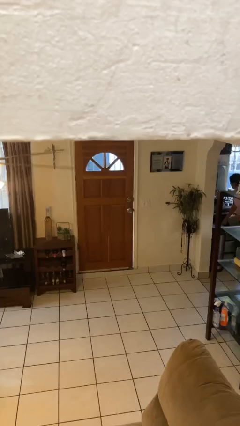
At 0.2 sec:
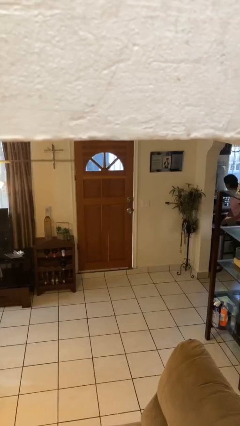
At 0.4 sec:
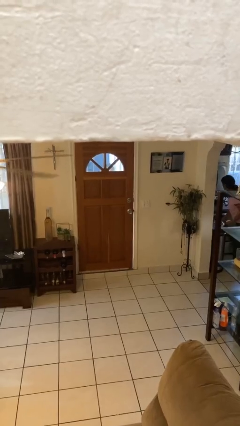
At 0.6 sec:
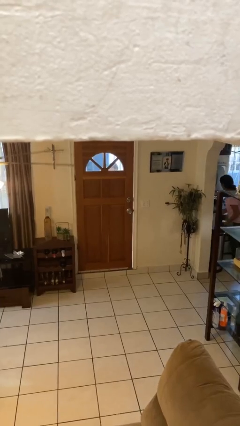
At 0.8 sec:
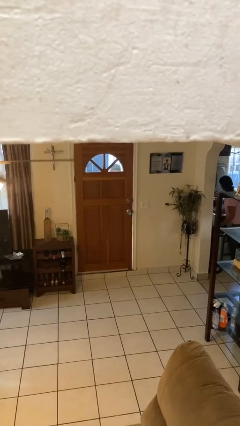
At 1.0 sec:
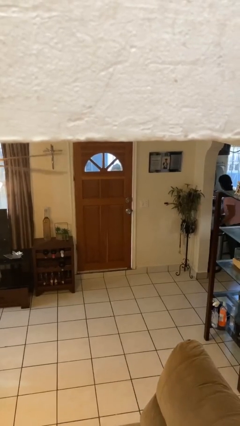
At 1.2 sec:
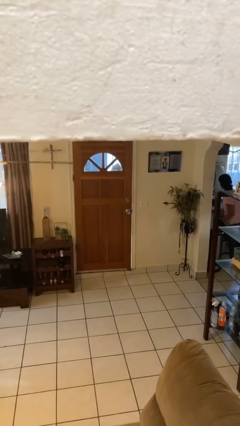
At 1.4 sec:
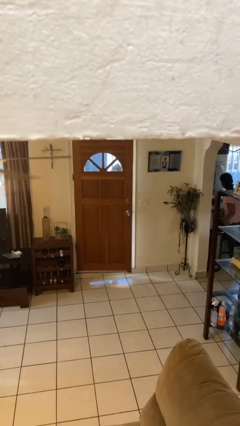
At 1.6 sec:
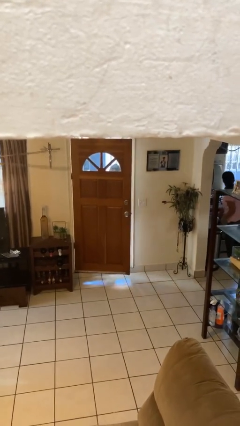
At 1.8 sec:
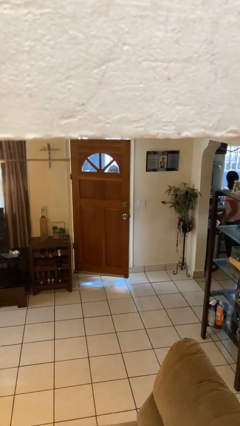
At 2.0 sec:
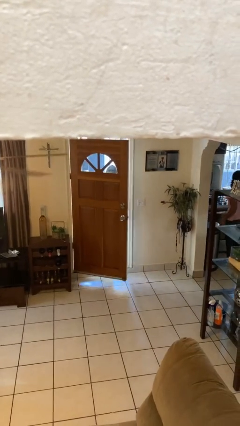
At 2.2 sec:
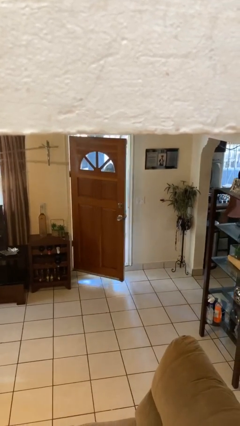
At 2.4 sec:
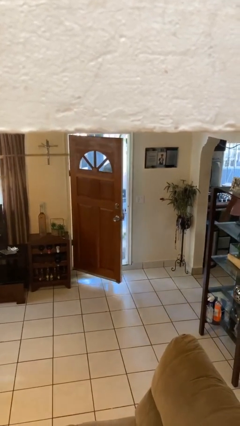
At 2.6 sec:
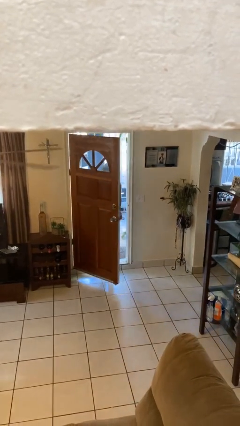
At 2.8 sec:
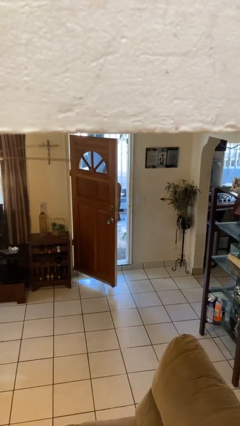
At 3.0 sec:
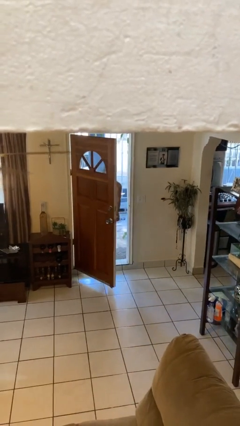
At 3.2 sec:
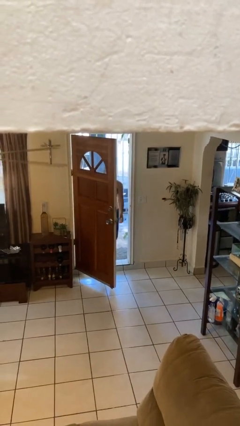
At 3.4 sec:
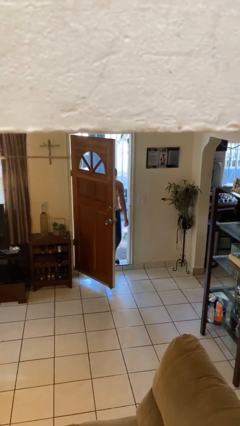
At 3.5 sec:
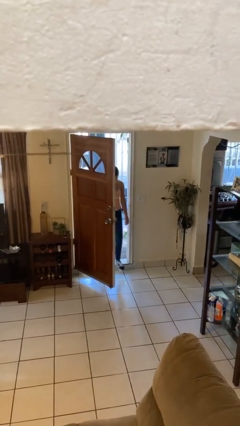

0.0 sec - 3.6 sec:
person opens facility door

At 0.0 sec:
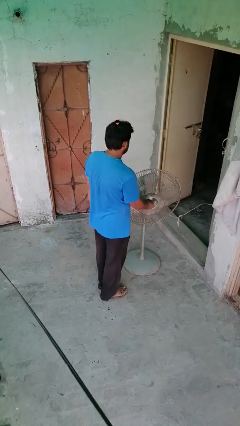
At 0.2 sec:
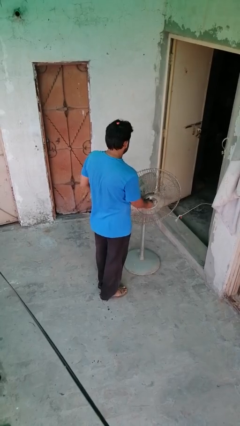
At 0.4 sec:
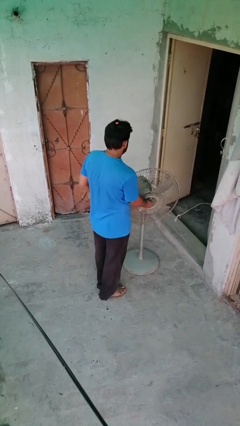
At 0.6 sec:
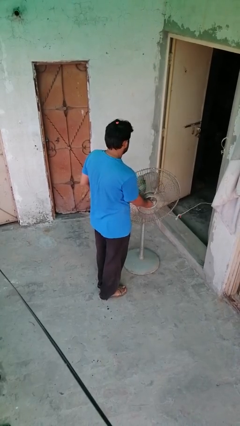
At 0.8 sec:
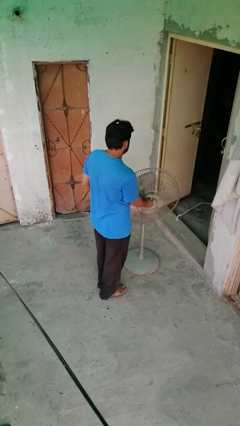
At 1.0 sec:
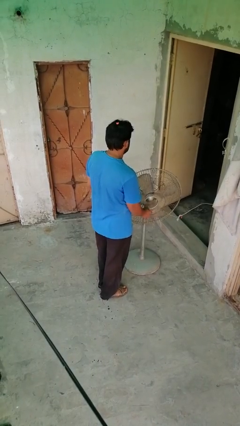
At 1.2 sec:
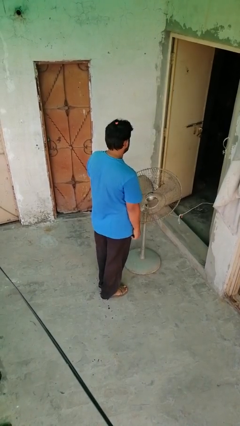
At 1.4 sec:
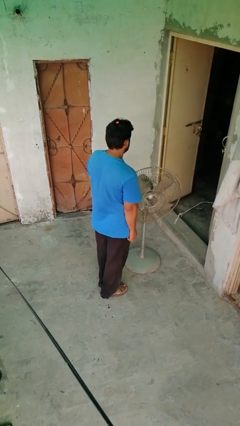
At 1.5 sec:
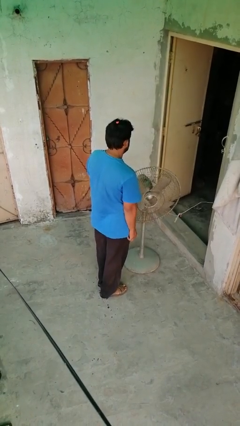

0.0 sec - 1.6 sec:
person turns off fan

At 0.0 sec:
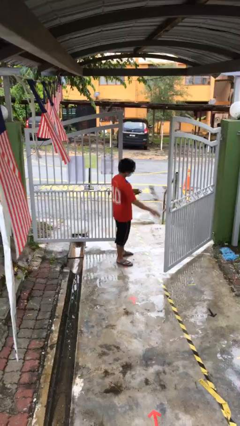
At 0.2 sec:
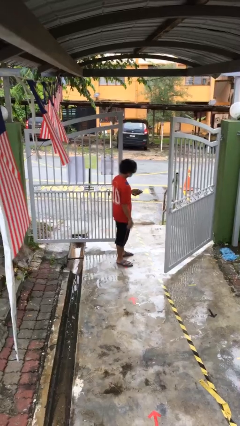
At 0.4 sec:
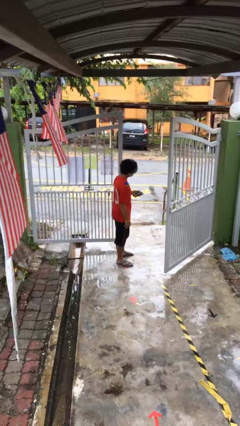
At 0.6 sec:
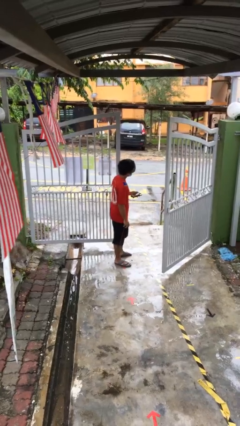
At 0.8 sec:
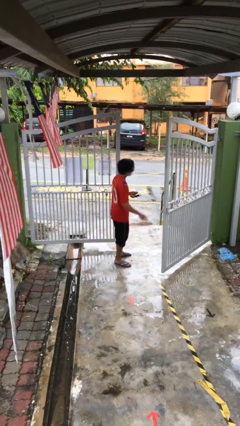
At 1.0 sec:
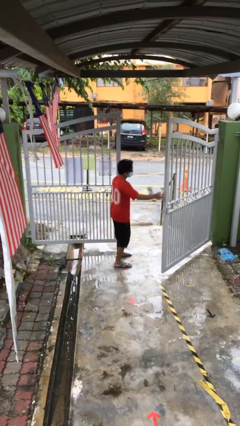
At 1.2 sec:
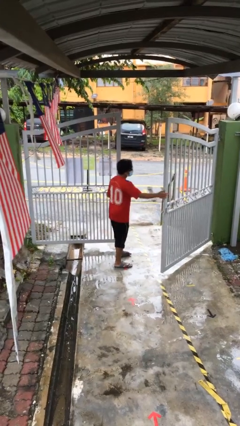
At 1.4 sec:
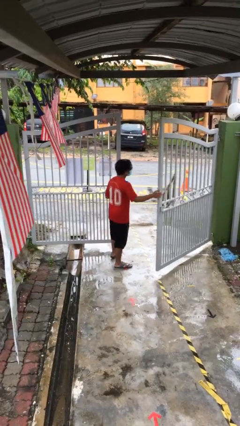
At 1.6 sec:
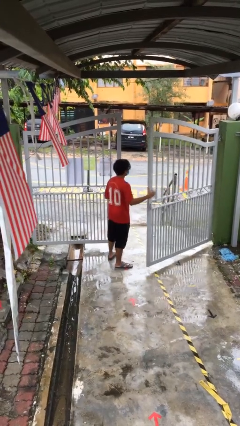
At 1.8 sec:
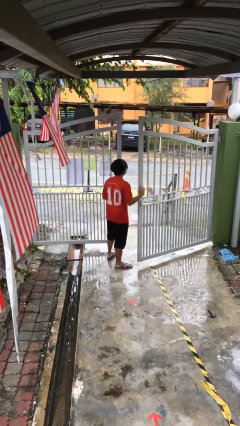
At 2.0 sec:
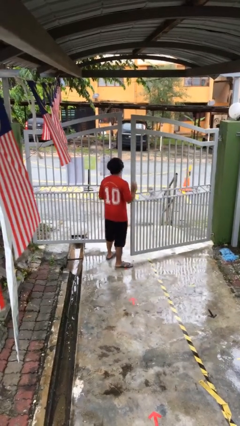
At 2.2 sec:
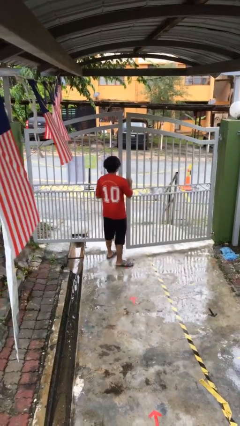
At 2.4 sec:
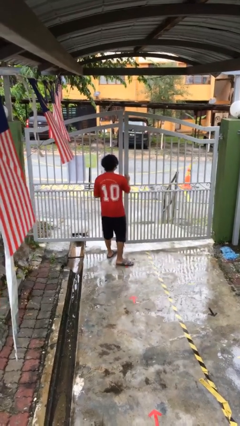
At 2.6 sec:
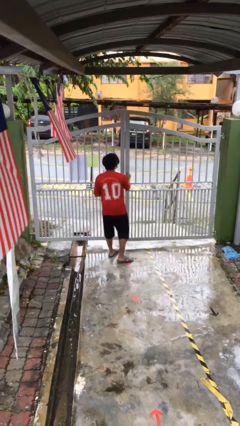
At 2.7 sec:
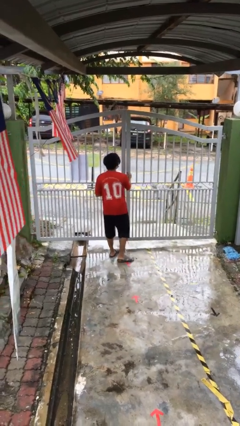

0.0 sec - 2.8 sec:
person closes facility door

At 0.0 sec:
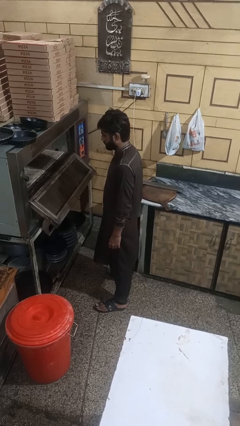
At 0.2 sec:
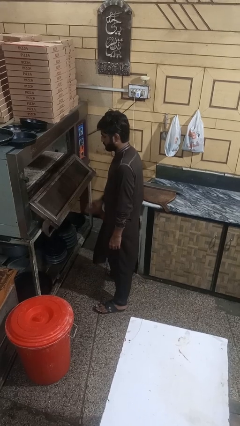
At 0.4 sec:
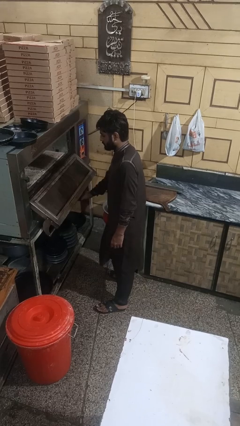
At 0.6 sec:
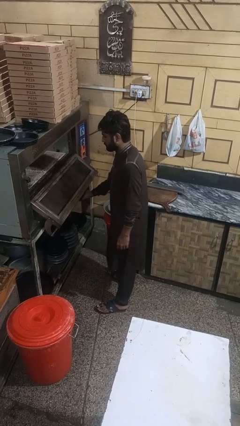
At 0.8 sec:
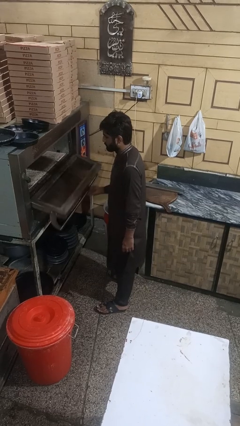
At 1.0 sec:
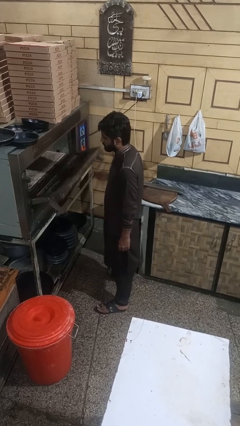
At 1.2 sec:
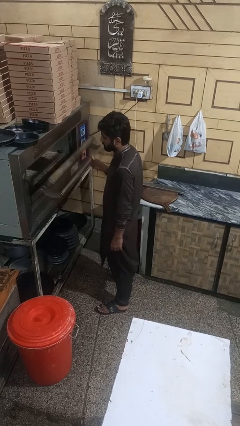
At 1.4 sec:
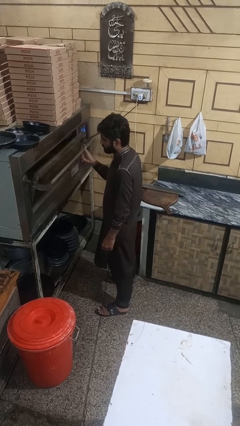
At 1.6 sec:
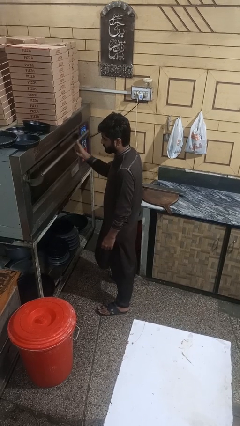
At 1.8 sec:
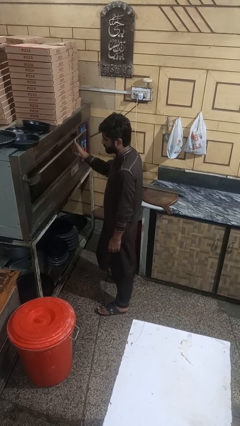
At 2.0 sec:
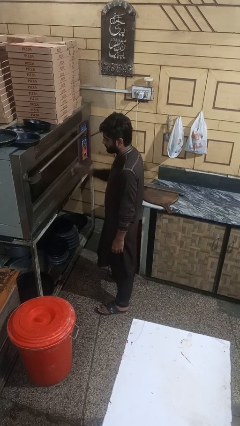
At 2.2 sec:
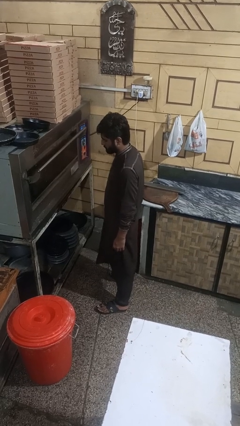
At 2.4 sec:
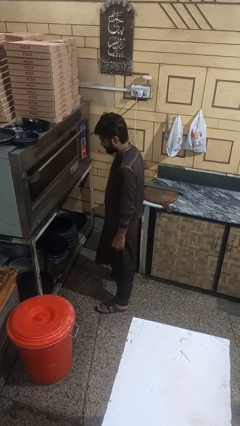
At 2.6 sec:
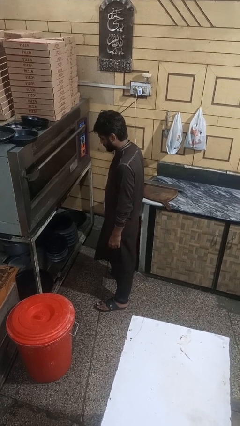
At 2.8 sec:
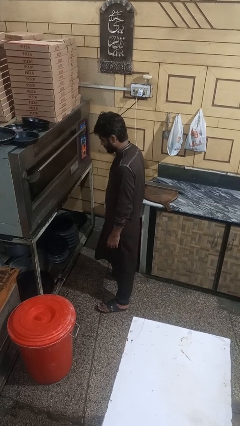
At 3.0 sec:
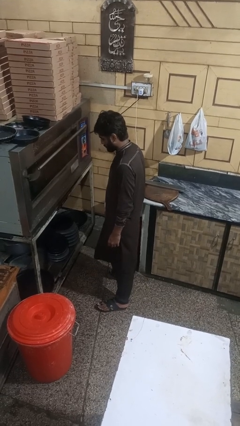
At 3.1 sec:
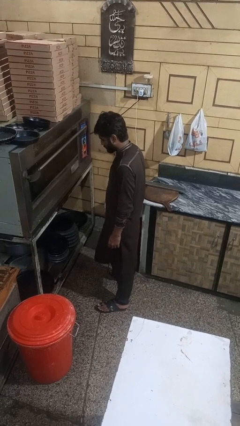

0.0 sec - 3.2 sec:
person closes microwave

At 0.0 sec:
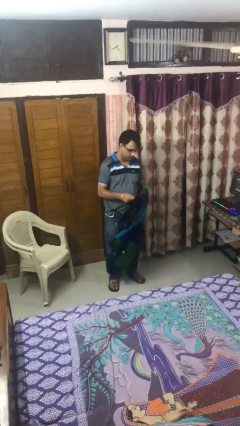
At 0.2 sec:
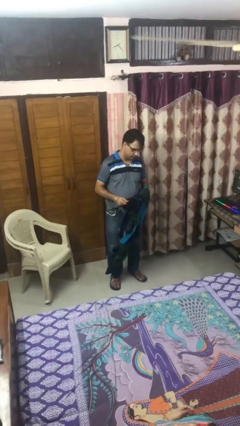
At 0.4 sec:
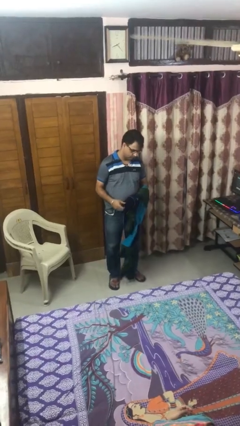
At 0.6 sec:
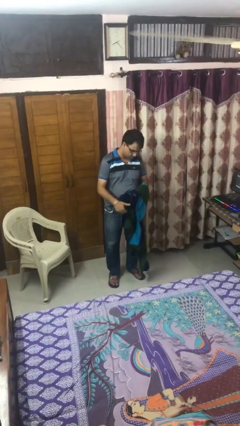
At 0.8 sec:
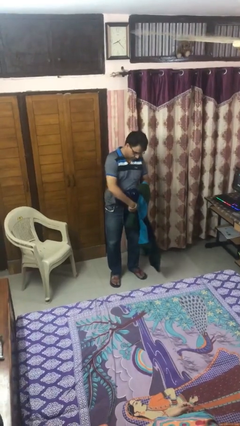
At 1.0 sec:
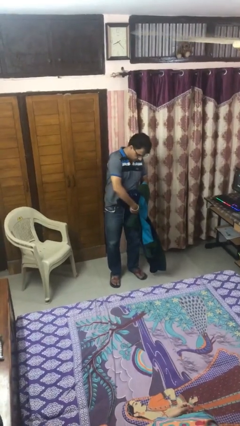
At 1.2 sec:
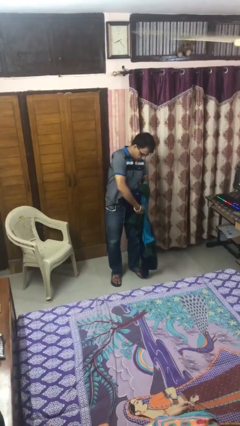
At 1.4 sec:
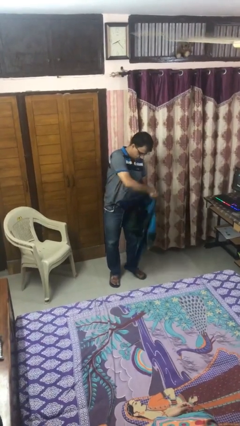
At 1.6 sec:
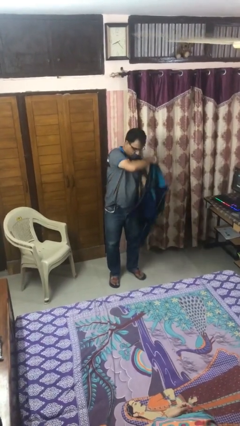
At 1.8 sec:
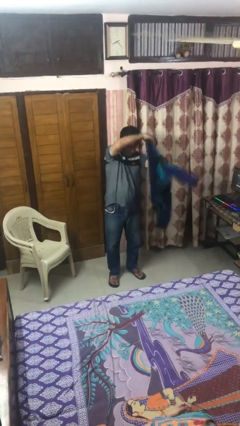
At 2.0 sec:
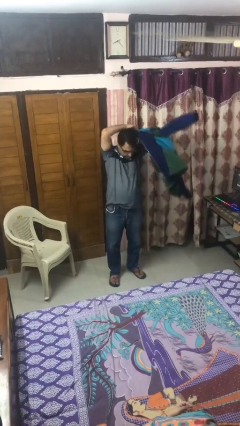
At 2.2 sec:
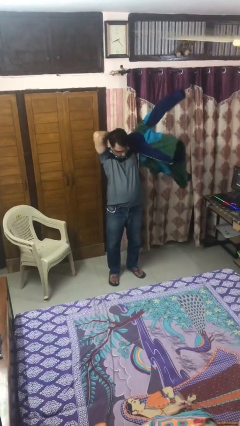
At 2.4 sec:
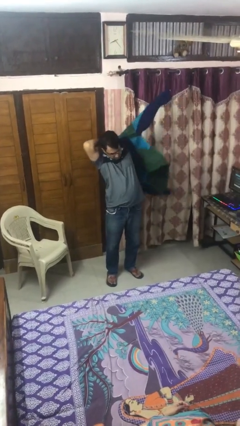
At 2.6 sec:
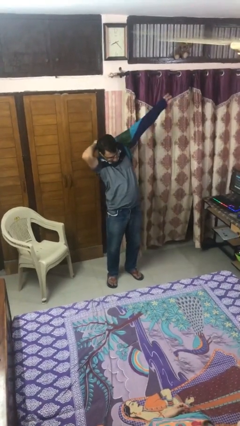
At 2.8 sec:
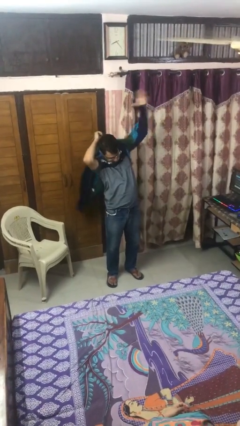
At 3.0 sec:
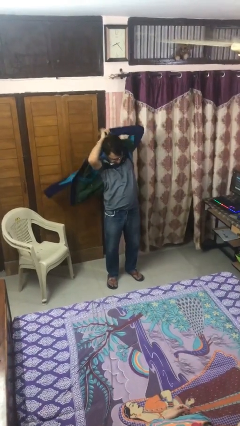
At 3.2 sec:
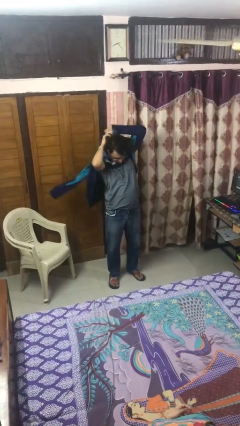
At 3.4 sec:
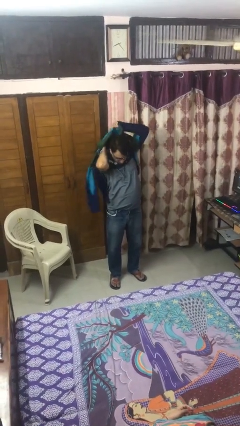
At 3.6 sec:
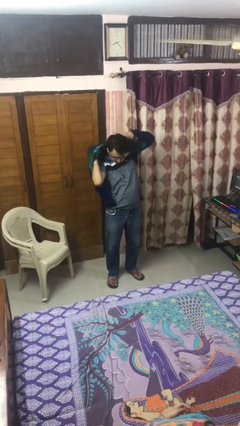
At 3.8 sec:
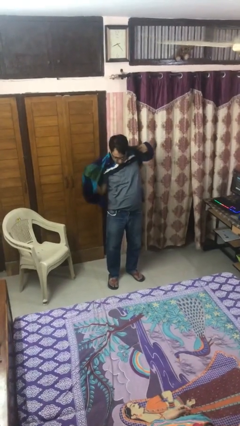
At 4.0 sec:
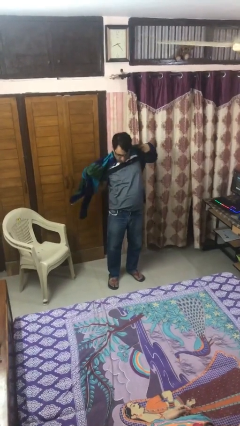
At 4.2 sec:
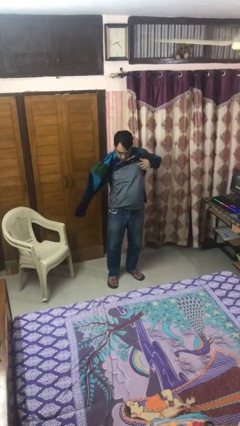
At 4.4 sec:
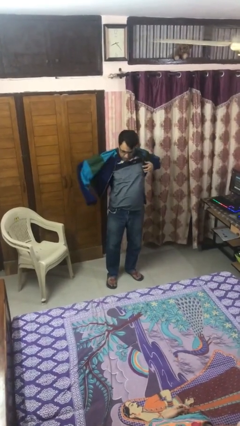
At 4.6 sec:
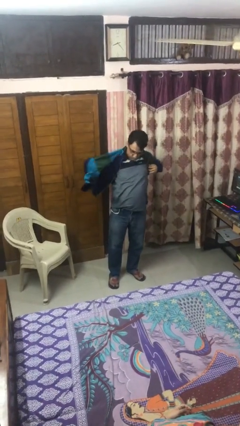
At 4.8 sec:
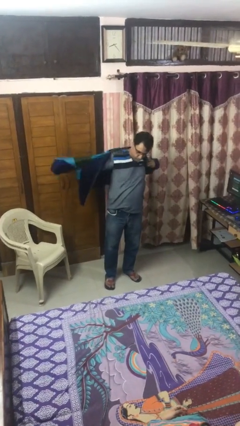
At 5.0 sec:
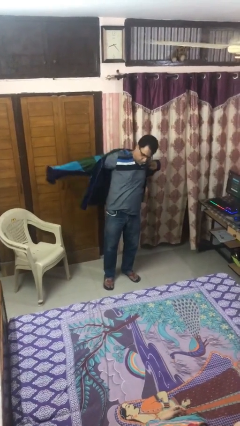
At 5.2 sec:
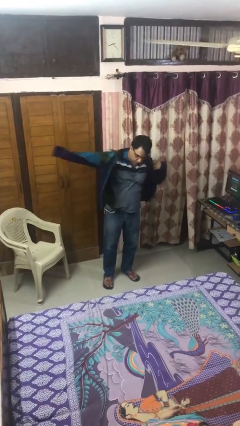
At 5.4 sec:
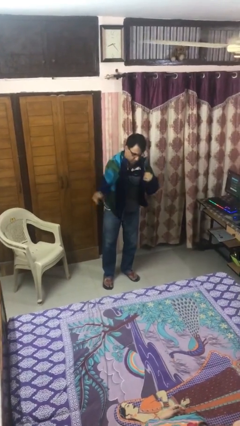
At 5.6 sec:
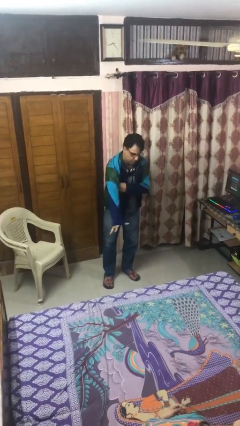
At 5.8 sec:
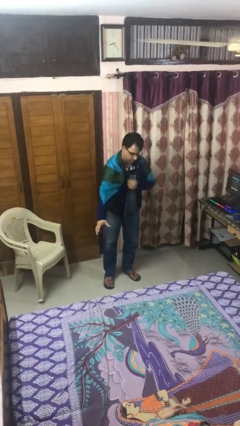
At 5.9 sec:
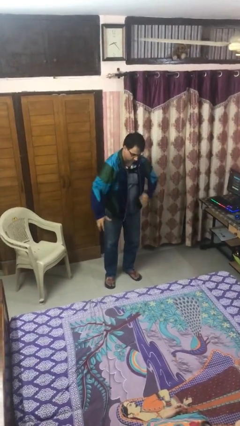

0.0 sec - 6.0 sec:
person puts on jacket

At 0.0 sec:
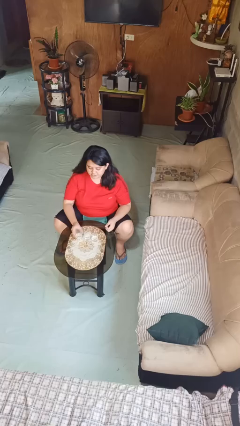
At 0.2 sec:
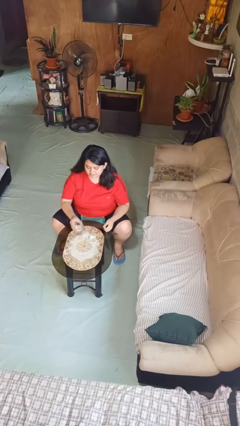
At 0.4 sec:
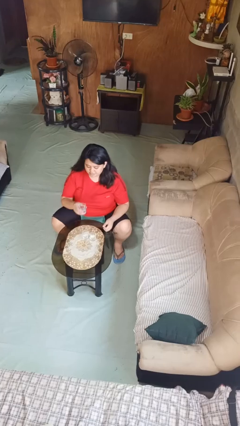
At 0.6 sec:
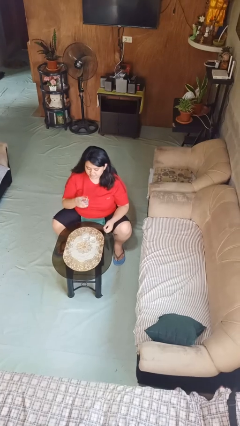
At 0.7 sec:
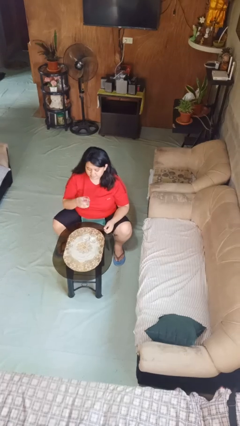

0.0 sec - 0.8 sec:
person picks up object from table
